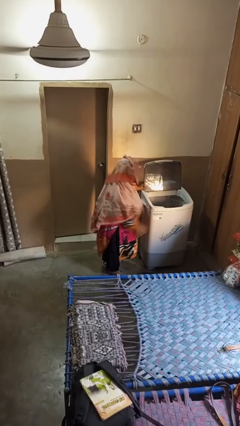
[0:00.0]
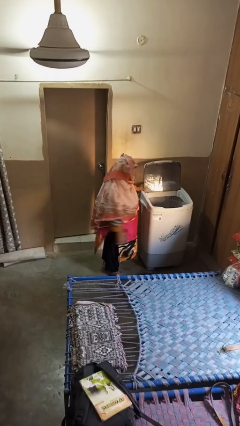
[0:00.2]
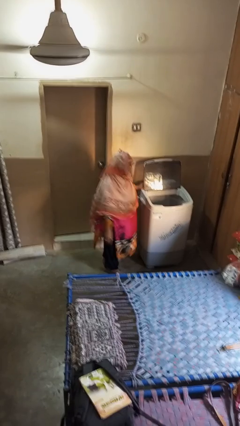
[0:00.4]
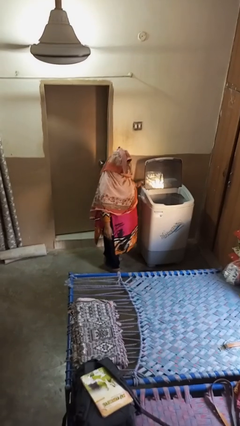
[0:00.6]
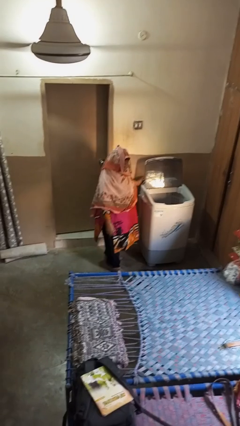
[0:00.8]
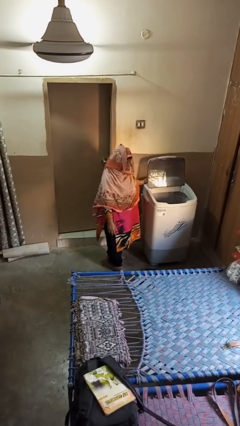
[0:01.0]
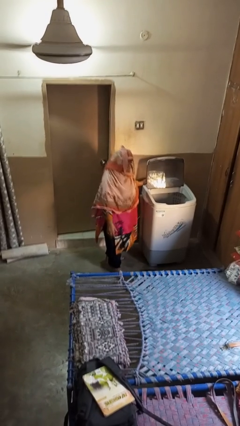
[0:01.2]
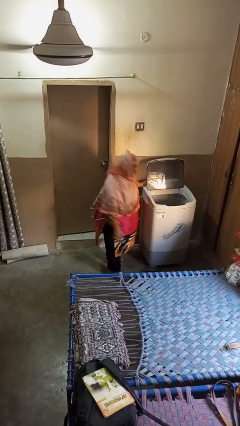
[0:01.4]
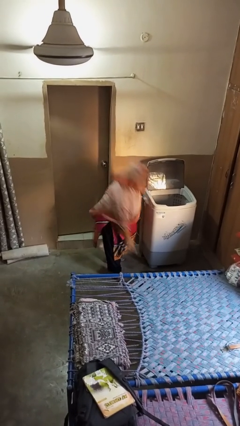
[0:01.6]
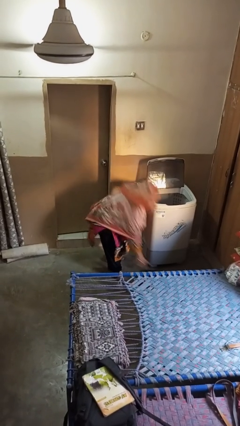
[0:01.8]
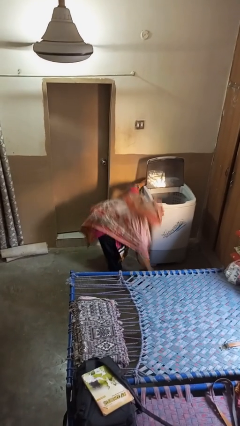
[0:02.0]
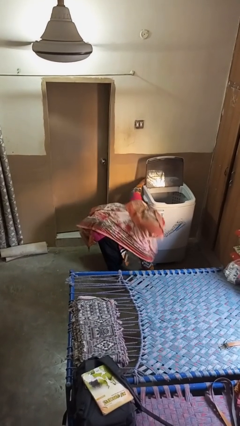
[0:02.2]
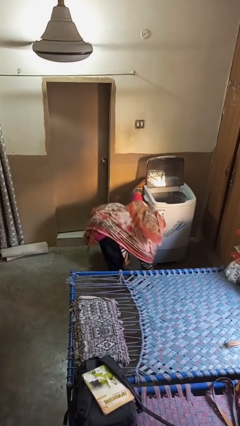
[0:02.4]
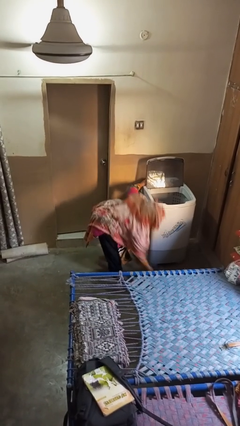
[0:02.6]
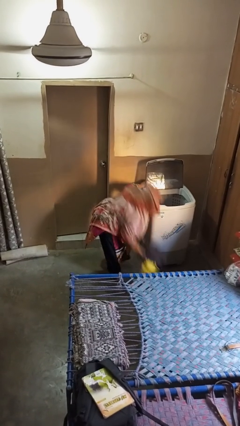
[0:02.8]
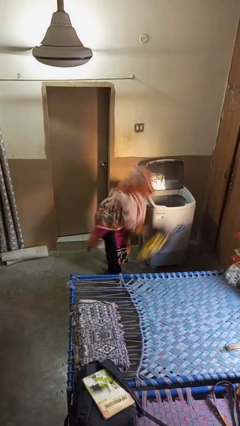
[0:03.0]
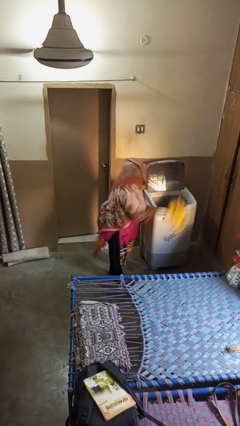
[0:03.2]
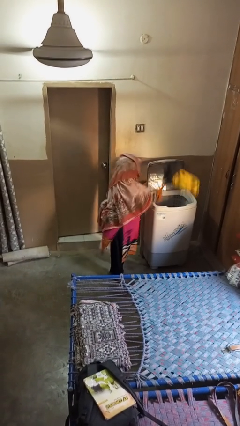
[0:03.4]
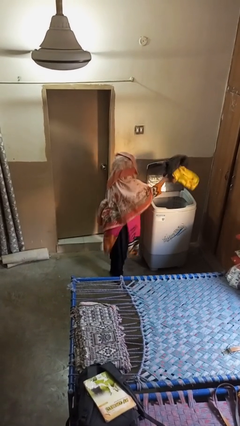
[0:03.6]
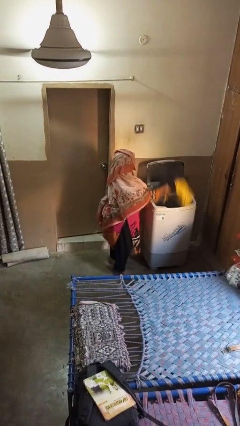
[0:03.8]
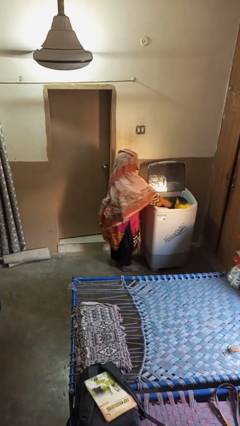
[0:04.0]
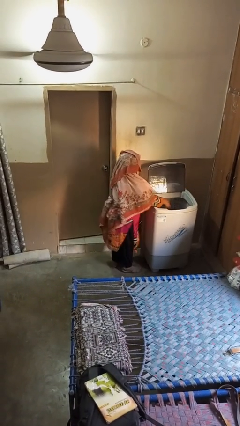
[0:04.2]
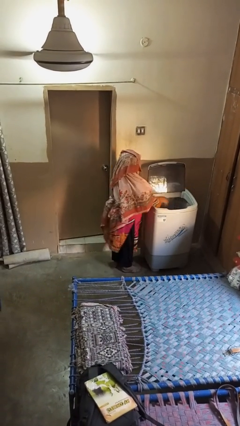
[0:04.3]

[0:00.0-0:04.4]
person loads clotheswasher

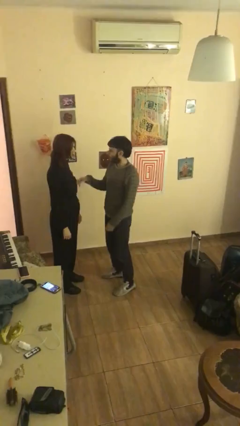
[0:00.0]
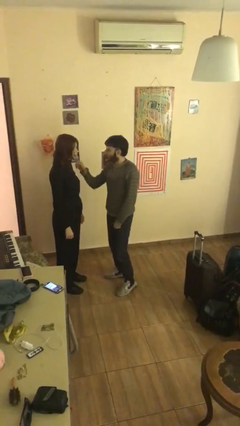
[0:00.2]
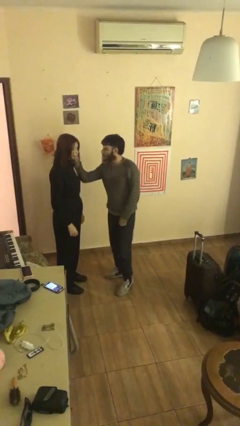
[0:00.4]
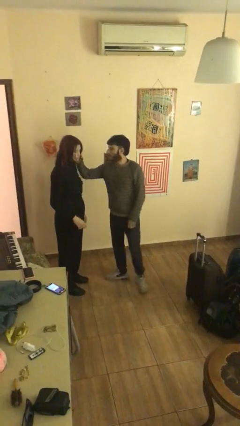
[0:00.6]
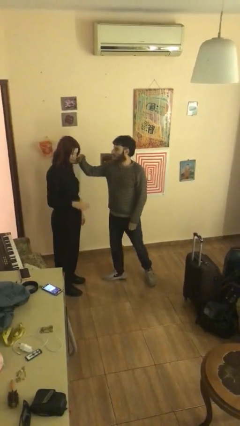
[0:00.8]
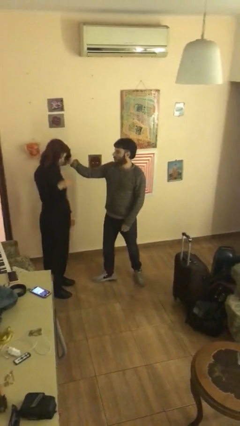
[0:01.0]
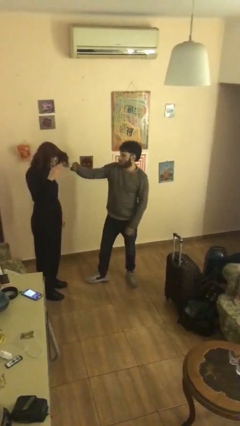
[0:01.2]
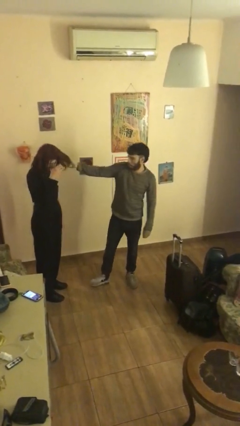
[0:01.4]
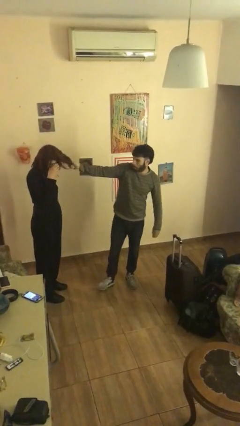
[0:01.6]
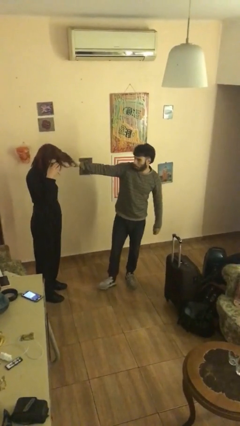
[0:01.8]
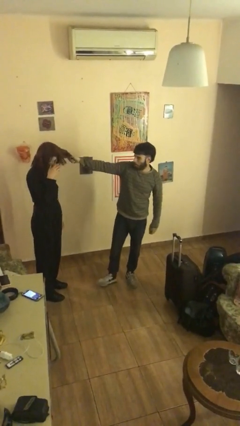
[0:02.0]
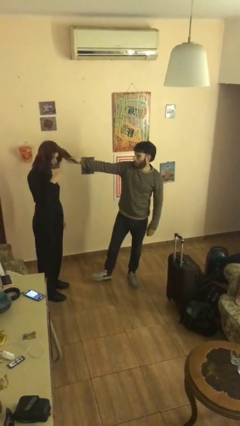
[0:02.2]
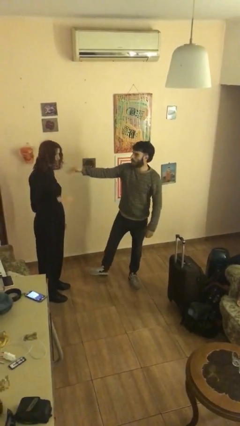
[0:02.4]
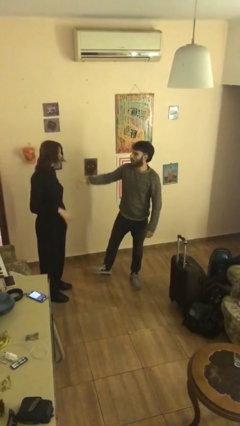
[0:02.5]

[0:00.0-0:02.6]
person grabs person by hair

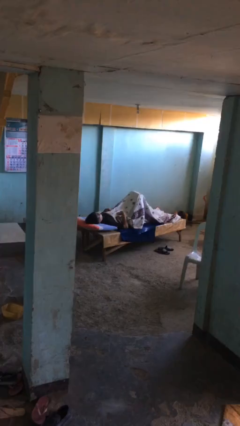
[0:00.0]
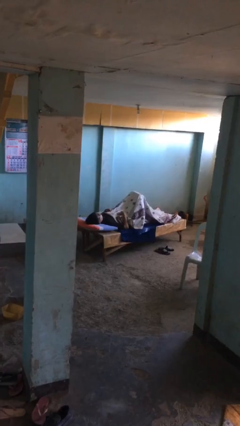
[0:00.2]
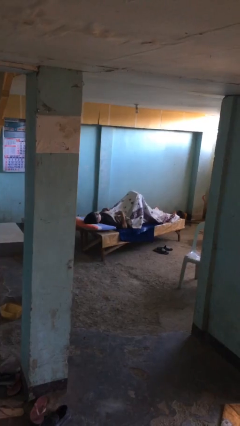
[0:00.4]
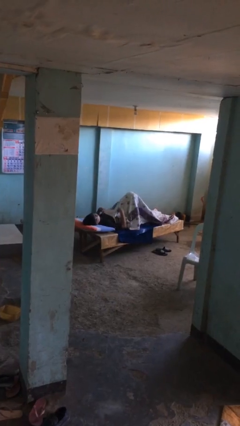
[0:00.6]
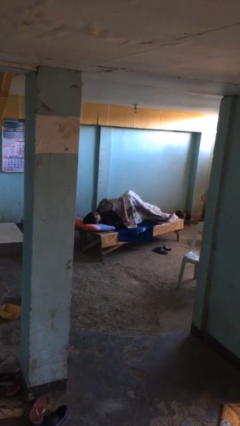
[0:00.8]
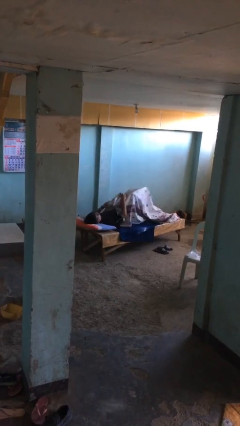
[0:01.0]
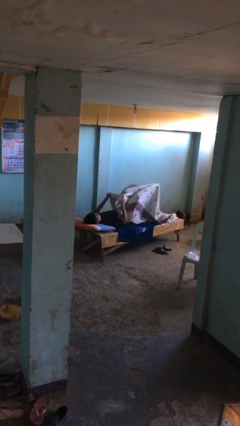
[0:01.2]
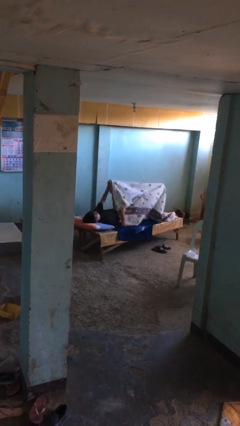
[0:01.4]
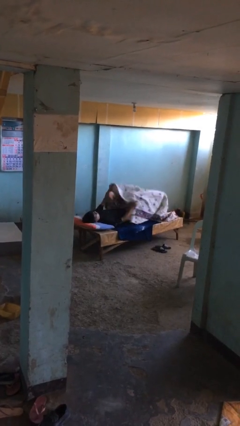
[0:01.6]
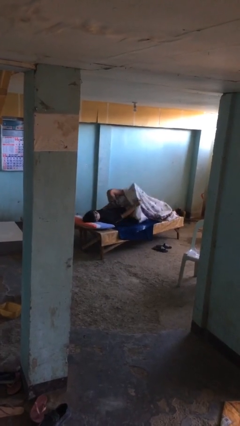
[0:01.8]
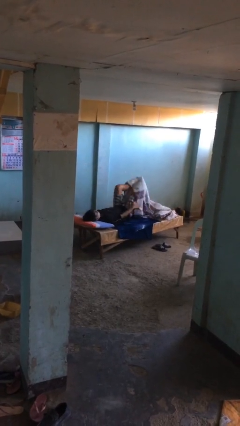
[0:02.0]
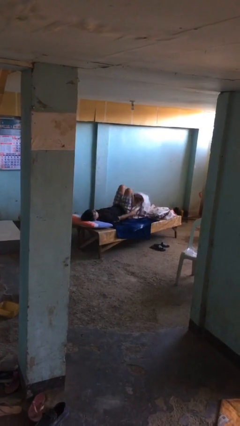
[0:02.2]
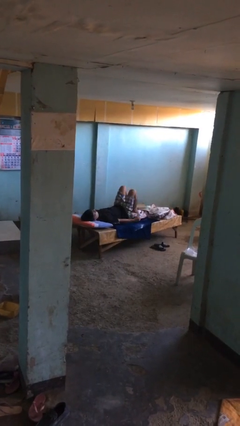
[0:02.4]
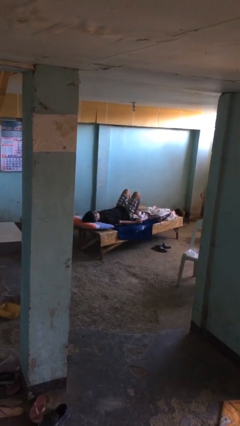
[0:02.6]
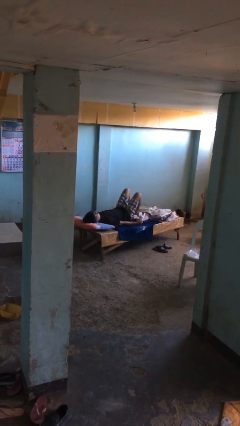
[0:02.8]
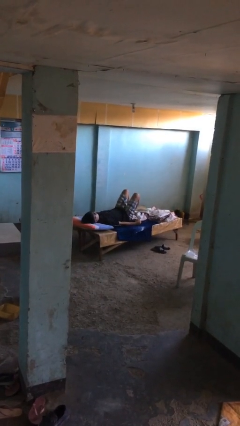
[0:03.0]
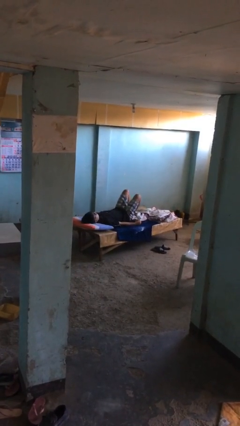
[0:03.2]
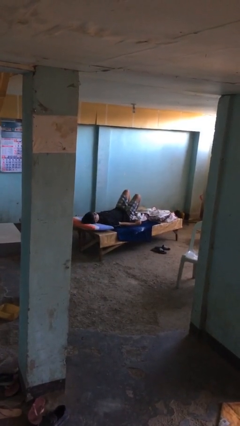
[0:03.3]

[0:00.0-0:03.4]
person uncovers with bedsheets

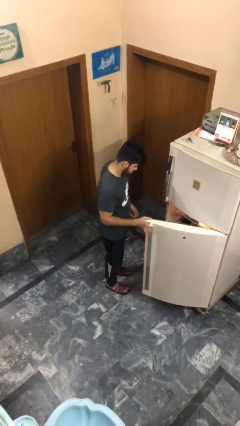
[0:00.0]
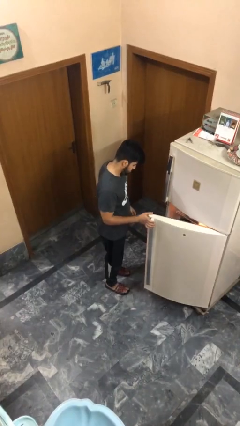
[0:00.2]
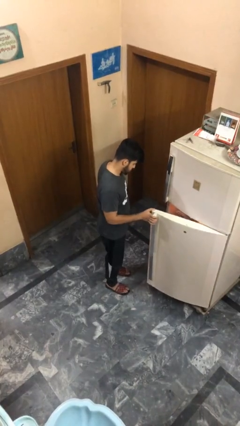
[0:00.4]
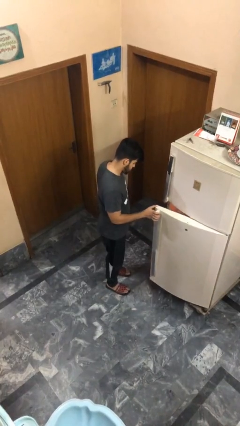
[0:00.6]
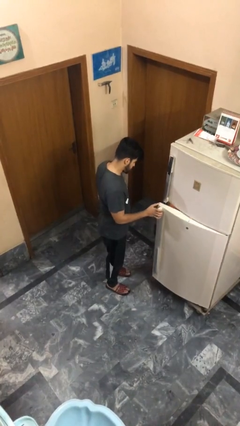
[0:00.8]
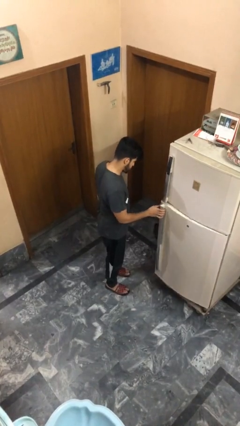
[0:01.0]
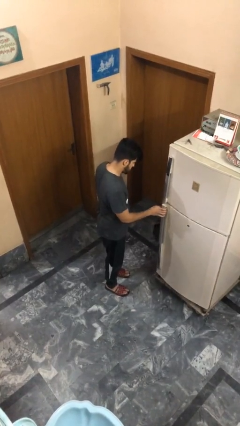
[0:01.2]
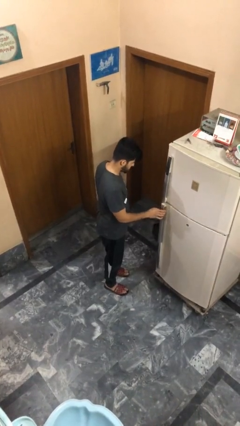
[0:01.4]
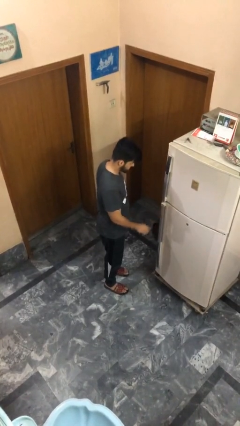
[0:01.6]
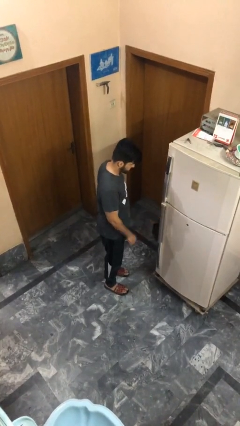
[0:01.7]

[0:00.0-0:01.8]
person closes refrigerator

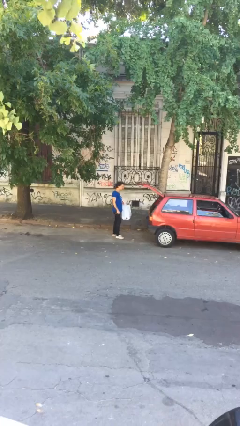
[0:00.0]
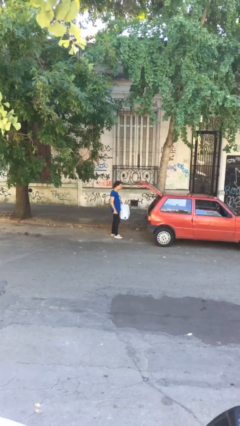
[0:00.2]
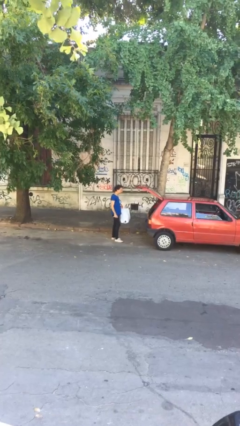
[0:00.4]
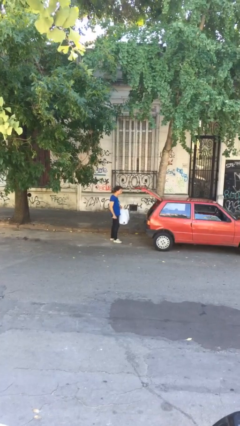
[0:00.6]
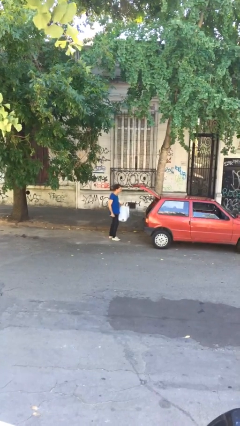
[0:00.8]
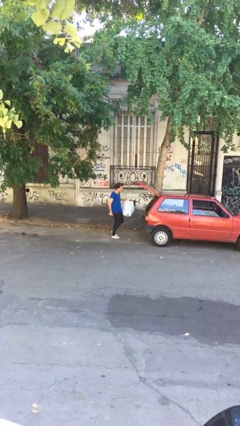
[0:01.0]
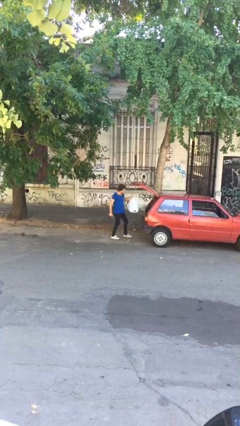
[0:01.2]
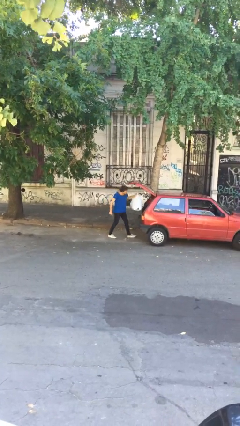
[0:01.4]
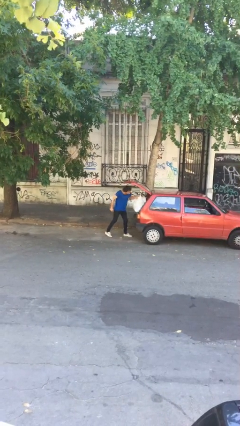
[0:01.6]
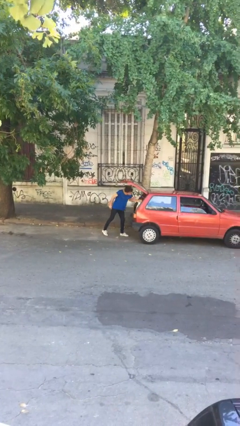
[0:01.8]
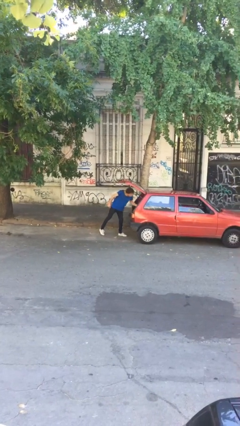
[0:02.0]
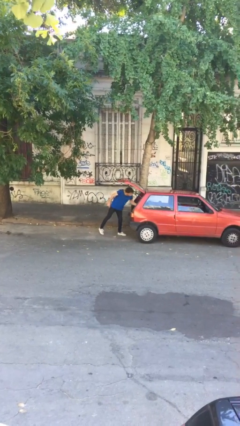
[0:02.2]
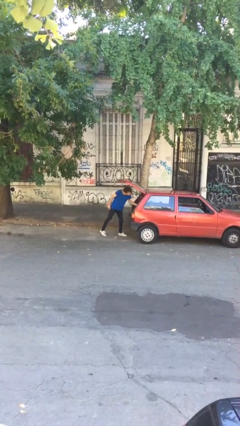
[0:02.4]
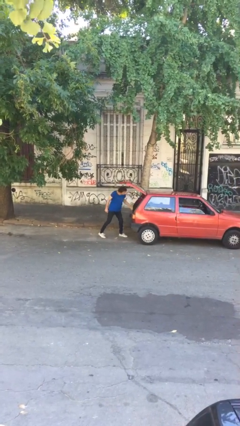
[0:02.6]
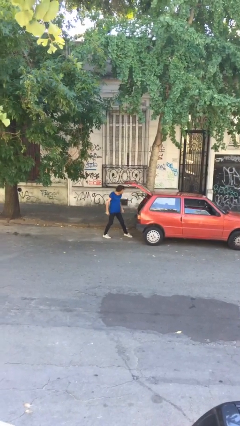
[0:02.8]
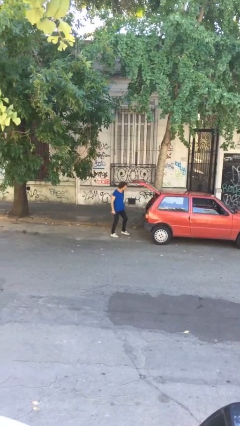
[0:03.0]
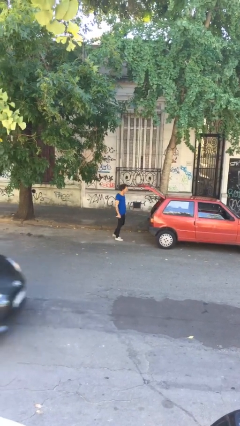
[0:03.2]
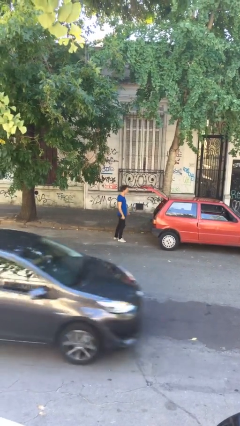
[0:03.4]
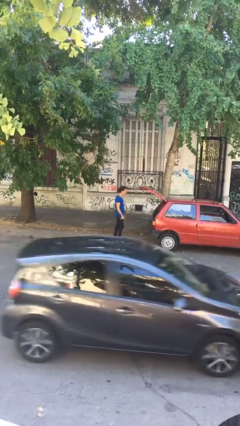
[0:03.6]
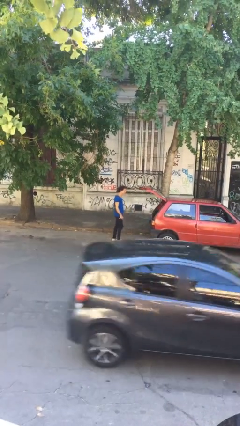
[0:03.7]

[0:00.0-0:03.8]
person loads car

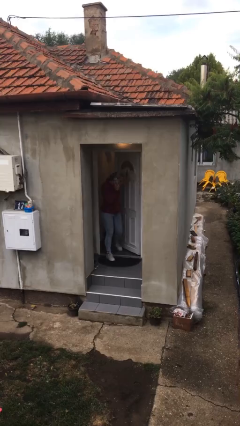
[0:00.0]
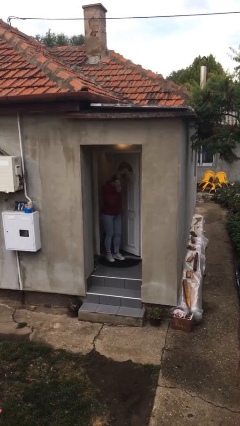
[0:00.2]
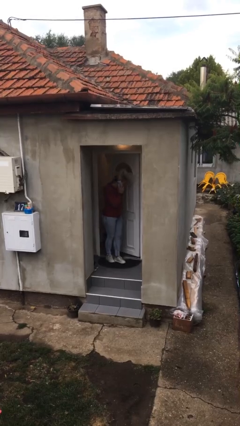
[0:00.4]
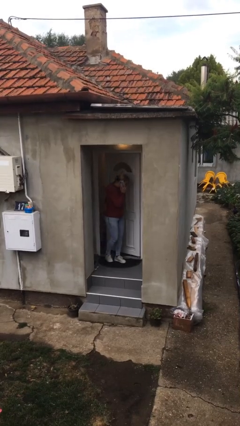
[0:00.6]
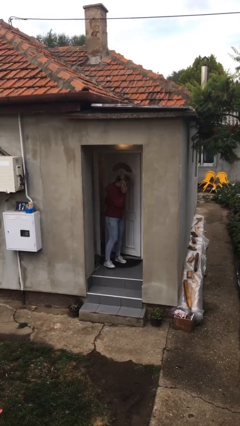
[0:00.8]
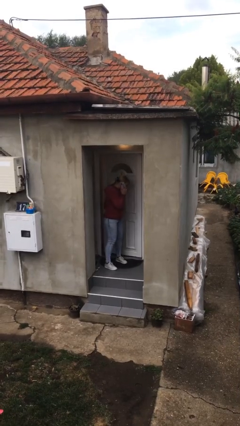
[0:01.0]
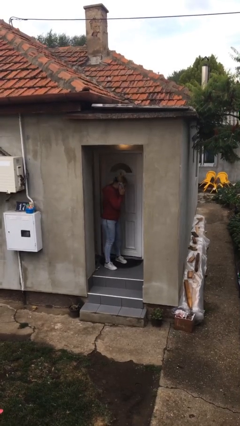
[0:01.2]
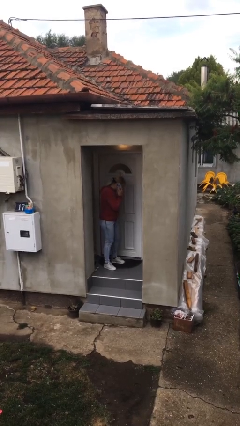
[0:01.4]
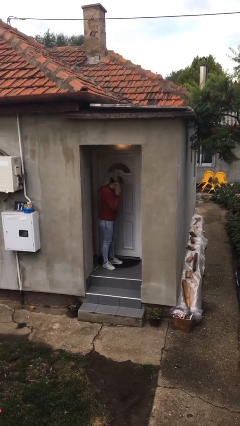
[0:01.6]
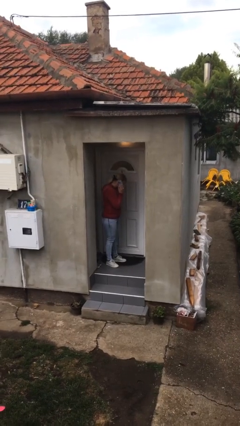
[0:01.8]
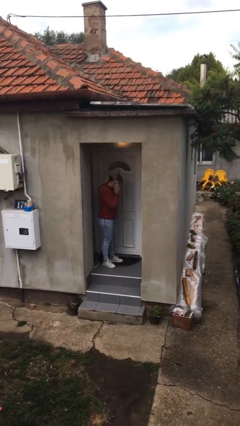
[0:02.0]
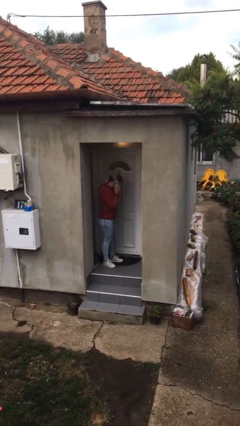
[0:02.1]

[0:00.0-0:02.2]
person enters scene through structure
